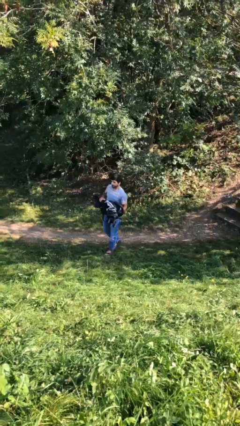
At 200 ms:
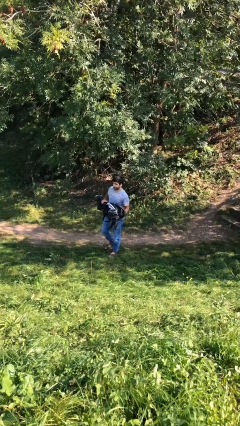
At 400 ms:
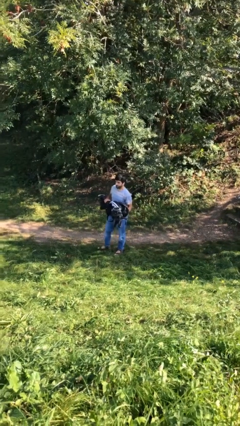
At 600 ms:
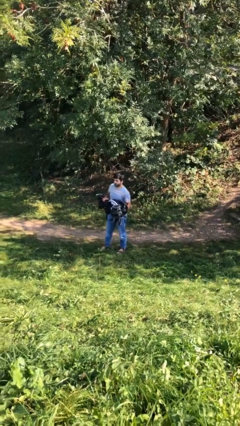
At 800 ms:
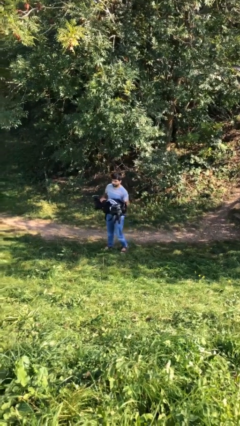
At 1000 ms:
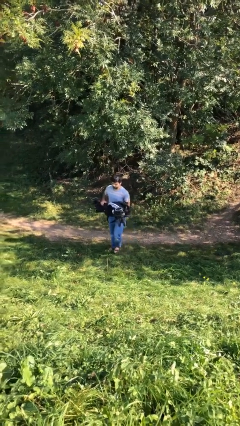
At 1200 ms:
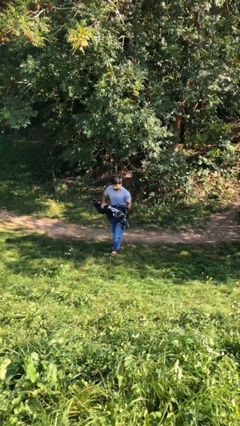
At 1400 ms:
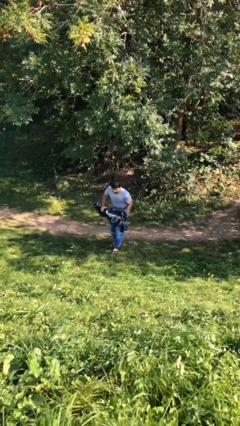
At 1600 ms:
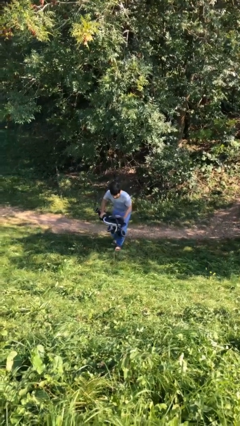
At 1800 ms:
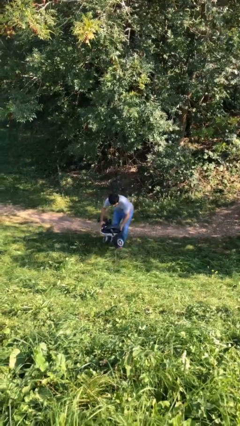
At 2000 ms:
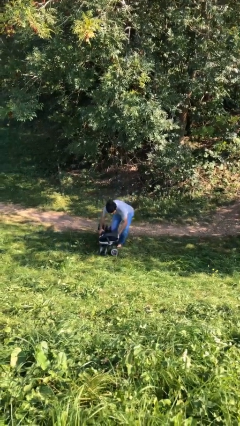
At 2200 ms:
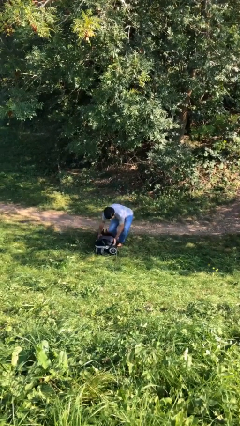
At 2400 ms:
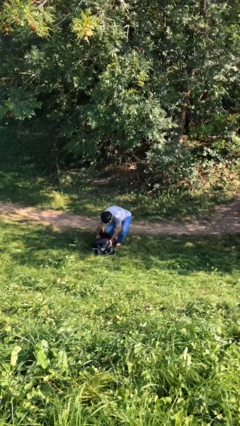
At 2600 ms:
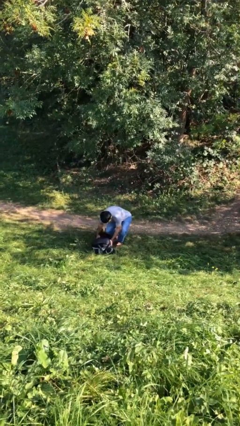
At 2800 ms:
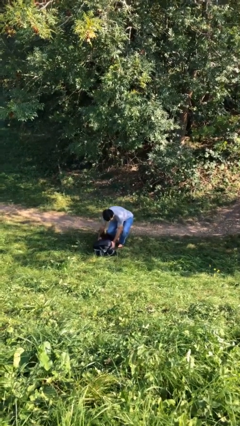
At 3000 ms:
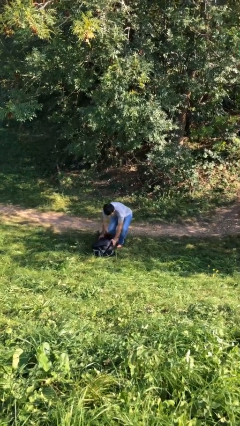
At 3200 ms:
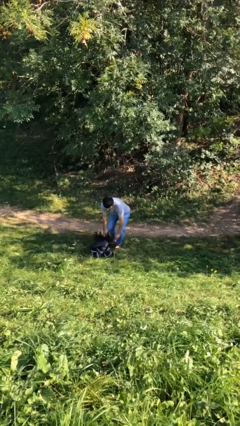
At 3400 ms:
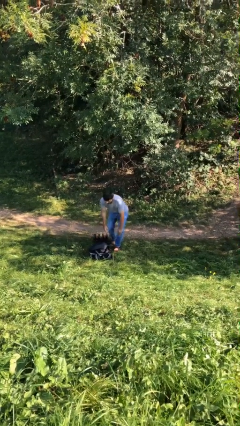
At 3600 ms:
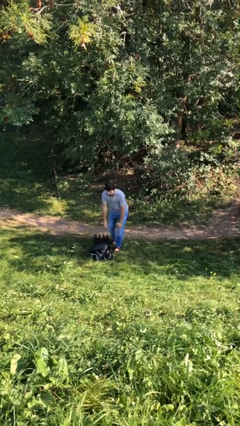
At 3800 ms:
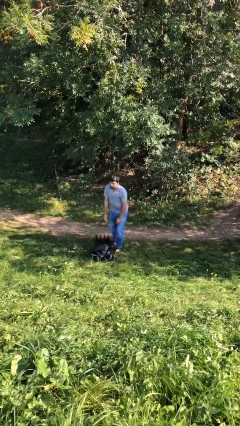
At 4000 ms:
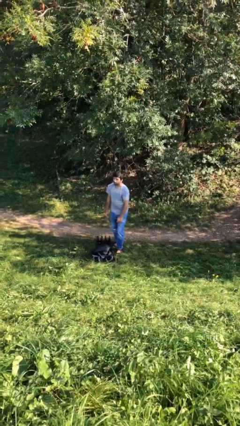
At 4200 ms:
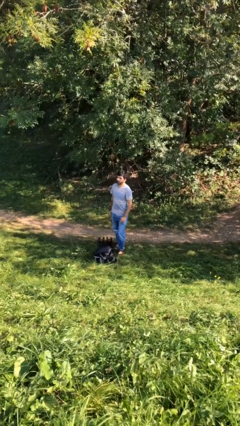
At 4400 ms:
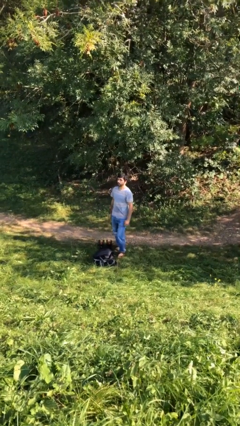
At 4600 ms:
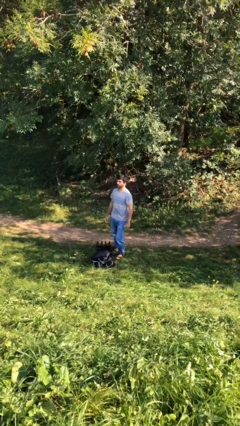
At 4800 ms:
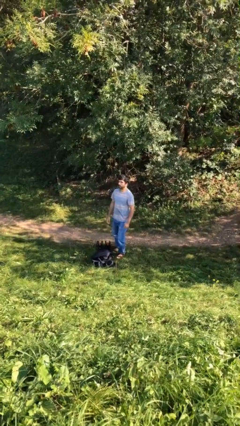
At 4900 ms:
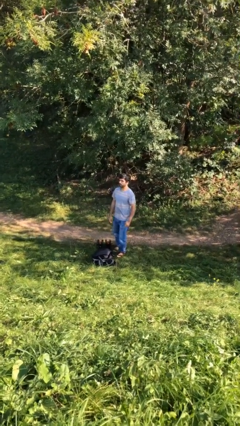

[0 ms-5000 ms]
person puts down object on floor

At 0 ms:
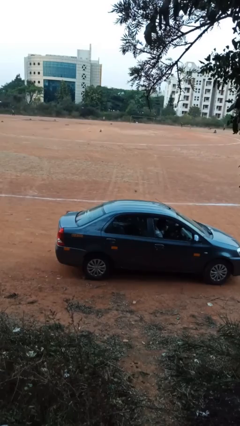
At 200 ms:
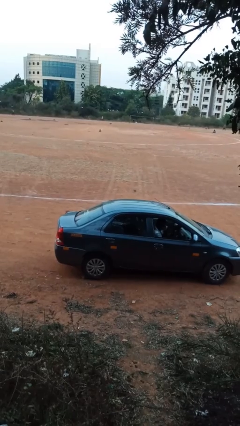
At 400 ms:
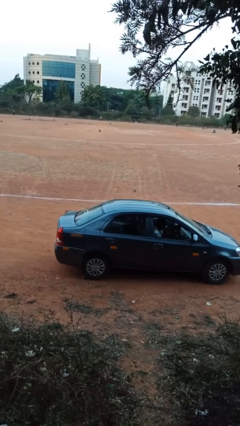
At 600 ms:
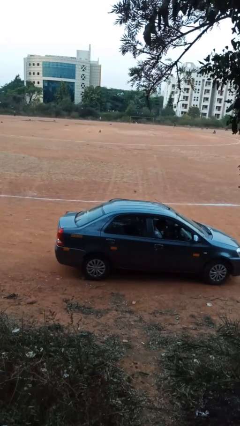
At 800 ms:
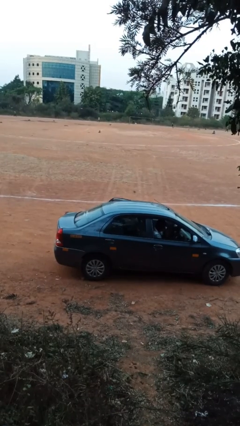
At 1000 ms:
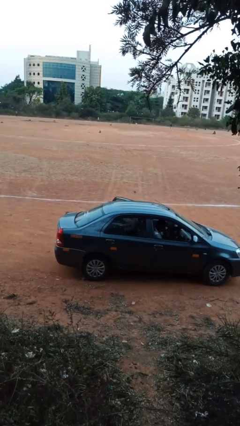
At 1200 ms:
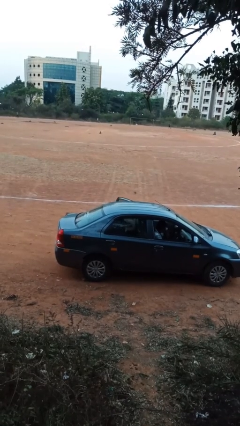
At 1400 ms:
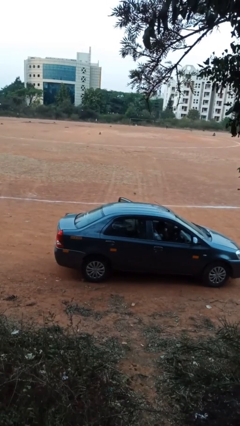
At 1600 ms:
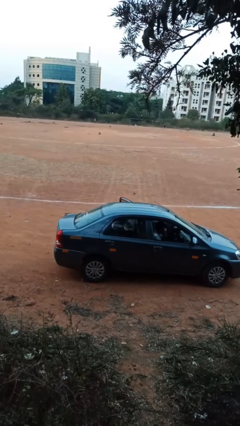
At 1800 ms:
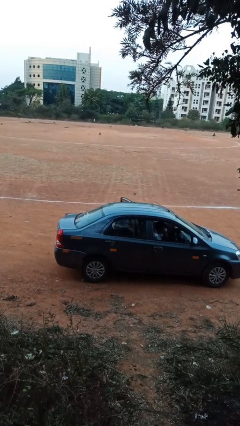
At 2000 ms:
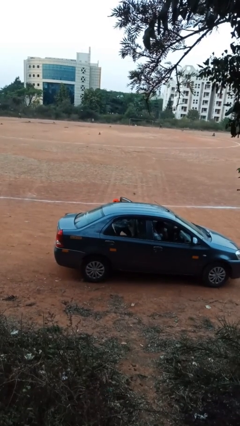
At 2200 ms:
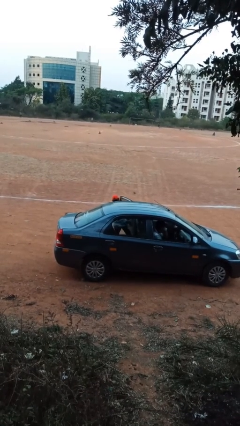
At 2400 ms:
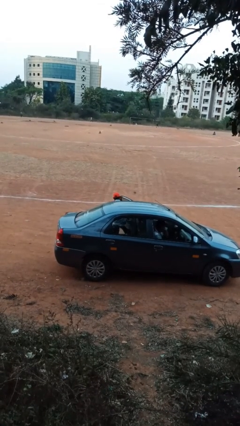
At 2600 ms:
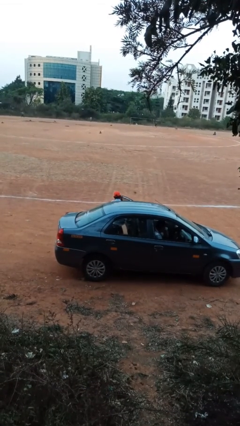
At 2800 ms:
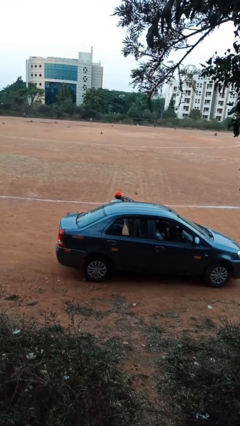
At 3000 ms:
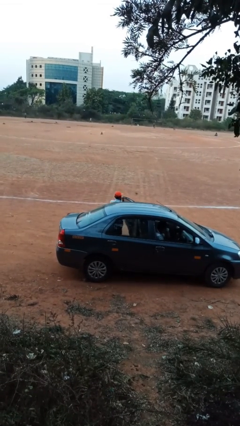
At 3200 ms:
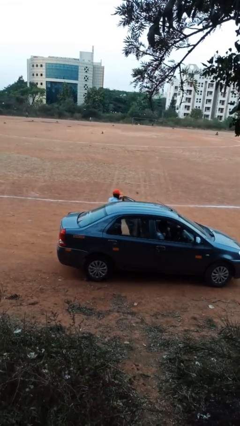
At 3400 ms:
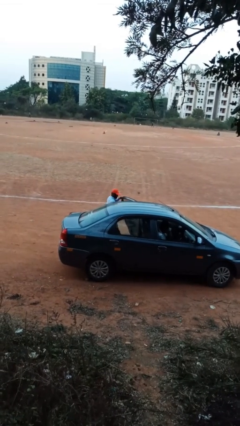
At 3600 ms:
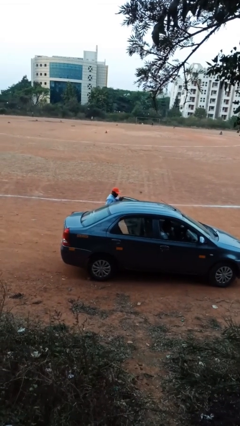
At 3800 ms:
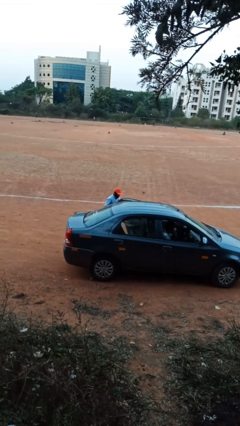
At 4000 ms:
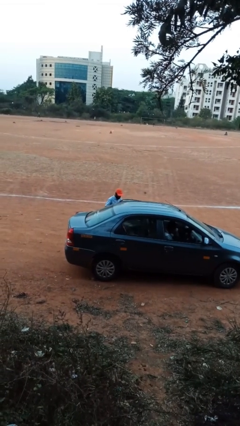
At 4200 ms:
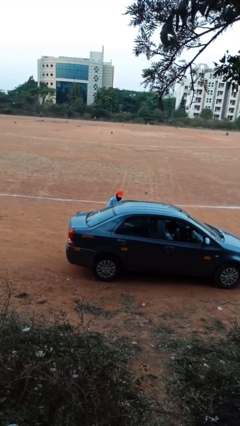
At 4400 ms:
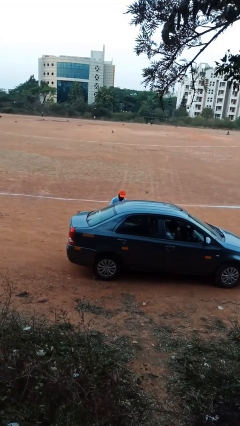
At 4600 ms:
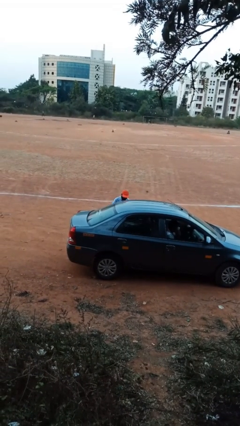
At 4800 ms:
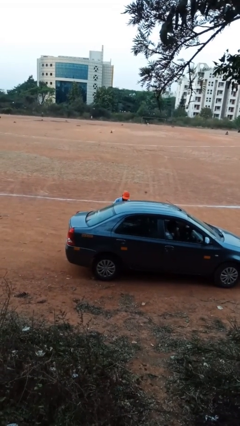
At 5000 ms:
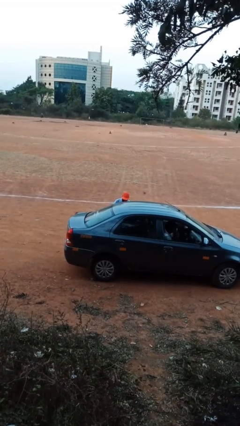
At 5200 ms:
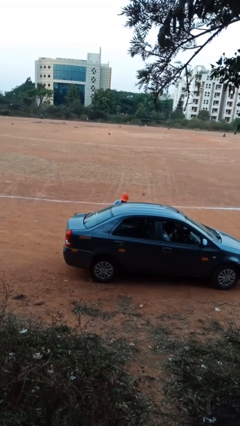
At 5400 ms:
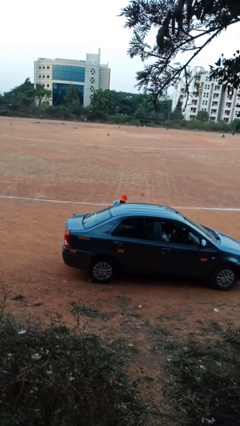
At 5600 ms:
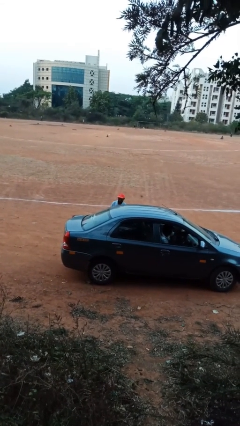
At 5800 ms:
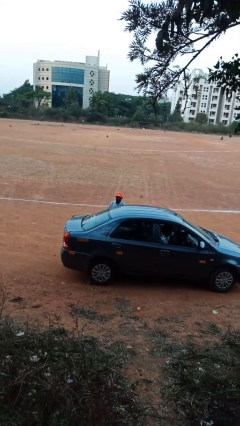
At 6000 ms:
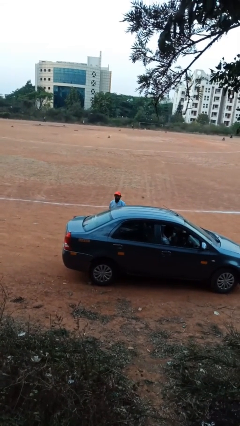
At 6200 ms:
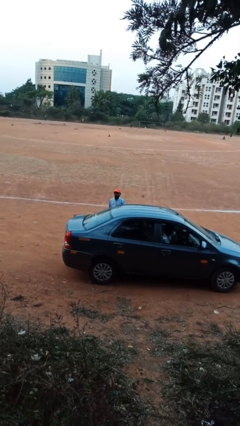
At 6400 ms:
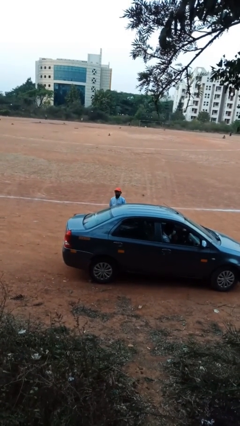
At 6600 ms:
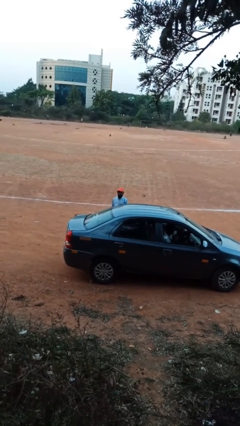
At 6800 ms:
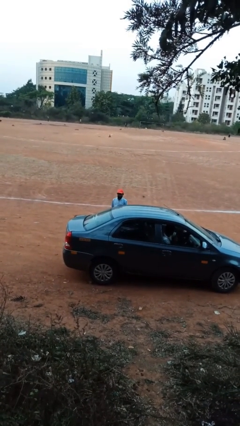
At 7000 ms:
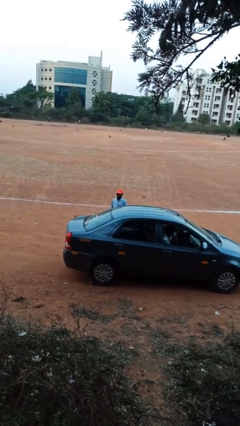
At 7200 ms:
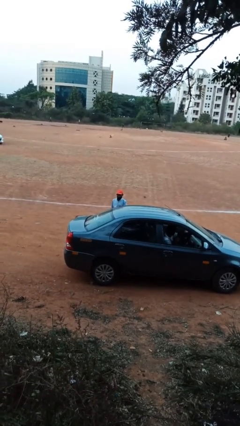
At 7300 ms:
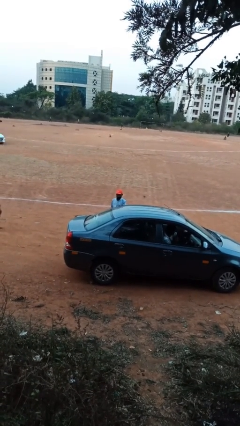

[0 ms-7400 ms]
person exits car

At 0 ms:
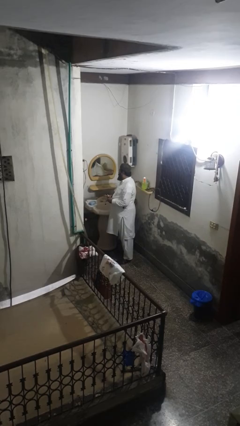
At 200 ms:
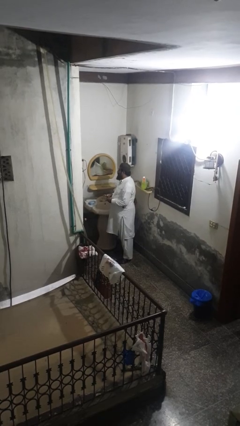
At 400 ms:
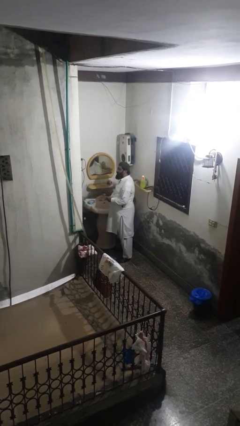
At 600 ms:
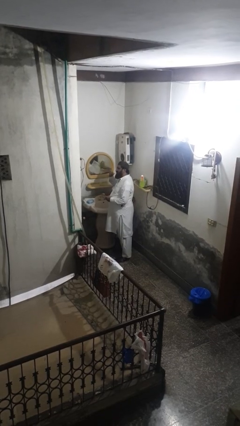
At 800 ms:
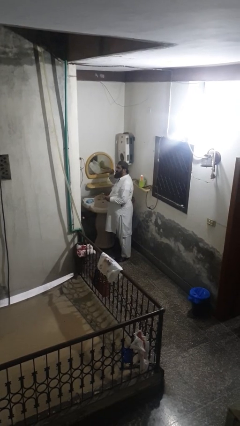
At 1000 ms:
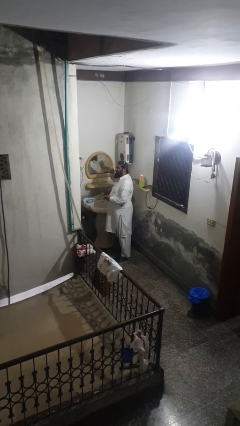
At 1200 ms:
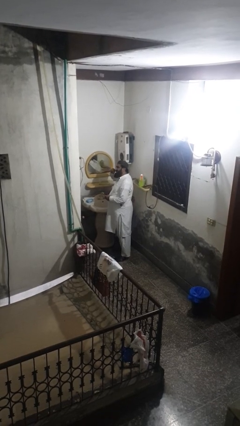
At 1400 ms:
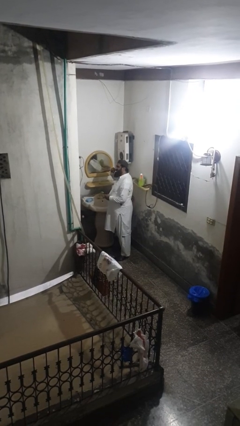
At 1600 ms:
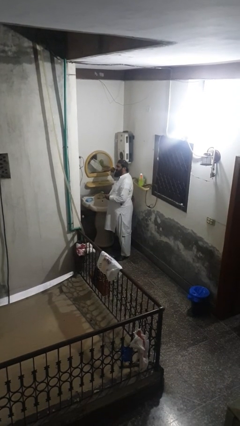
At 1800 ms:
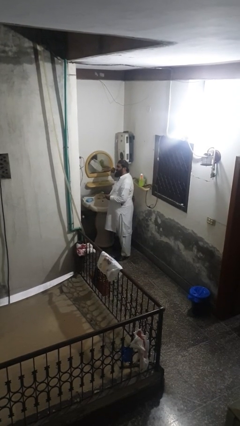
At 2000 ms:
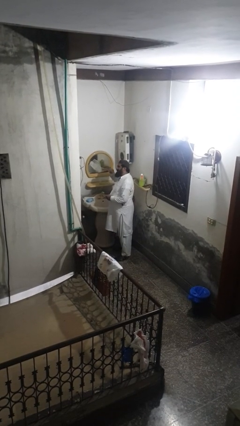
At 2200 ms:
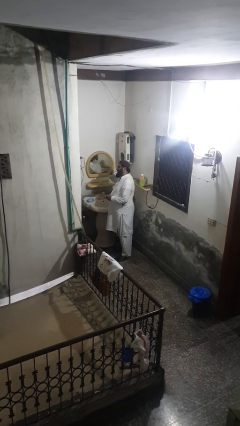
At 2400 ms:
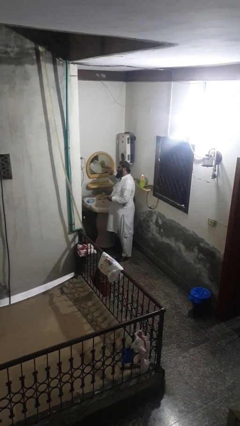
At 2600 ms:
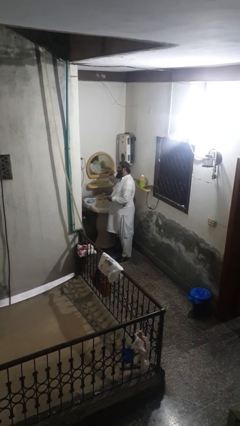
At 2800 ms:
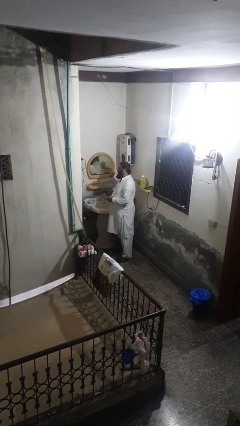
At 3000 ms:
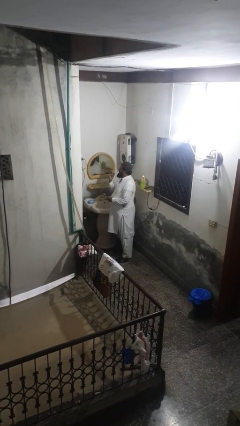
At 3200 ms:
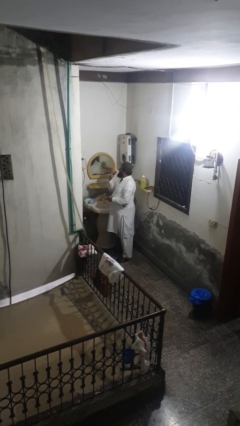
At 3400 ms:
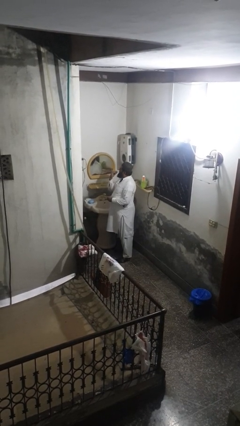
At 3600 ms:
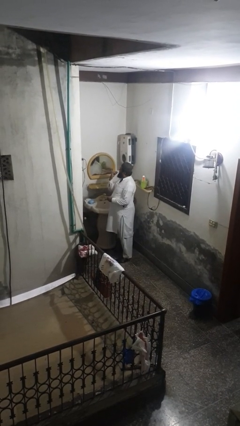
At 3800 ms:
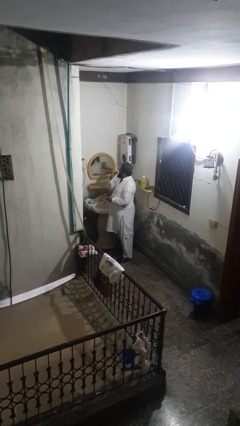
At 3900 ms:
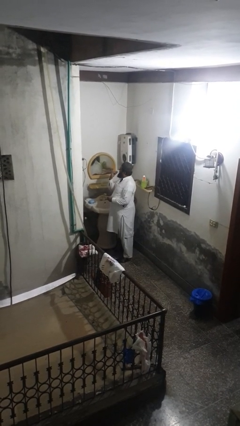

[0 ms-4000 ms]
person brushes teeth

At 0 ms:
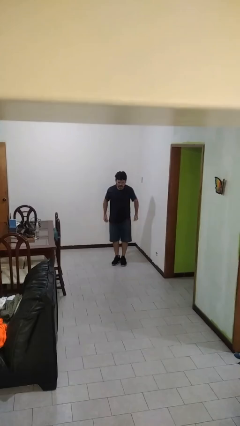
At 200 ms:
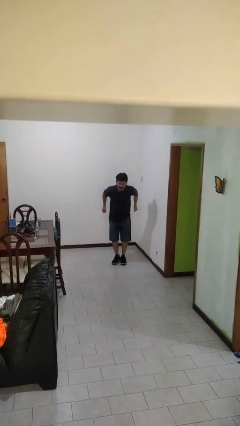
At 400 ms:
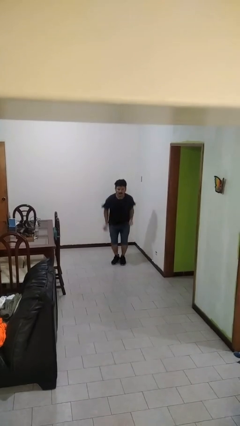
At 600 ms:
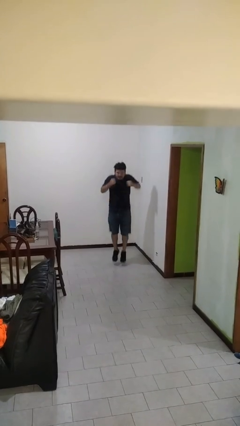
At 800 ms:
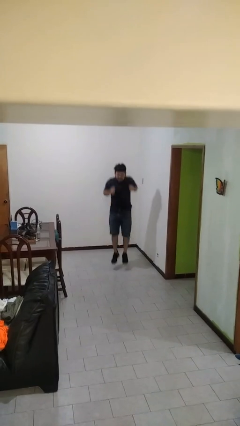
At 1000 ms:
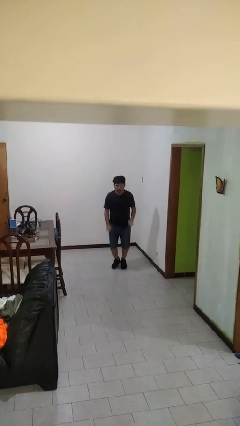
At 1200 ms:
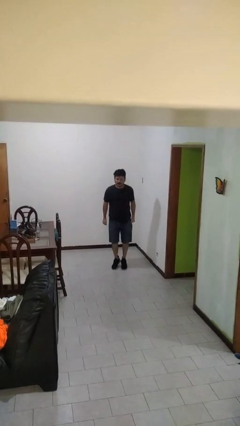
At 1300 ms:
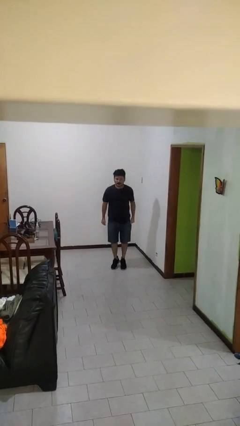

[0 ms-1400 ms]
person jumps
